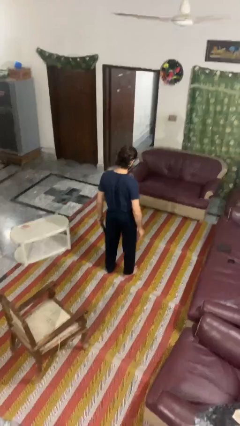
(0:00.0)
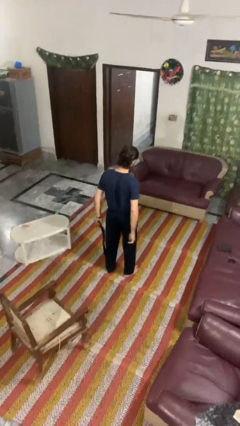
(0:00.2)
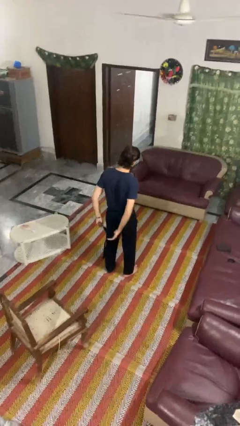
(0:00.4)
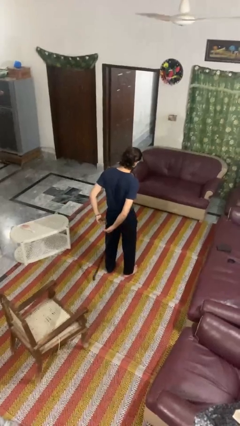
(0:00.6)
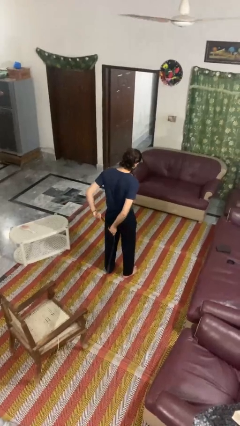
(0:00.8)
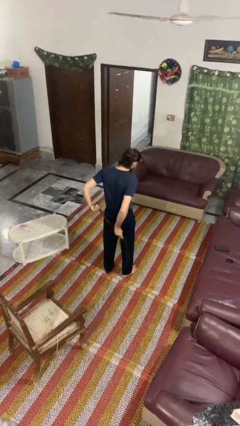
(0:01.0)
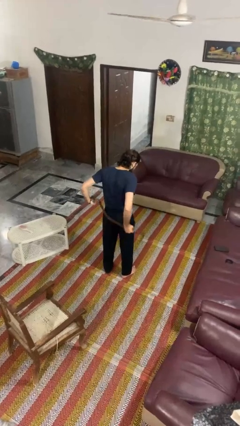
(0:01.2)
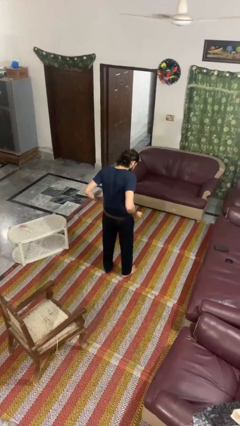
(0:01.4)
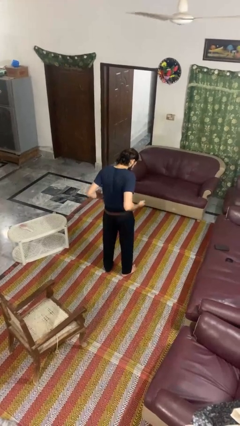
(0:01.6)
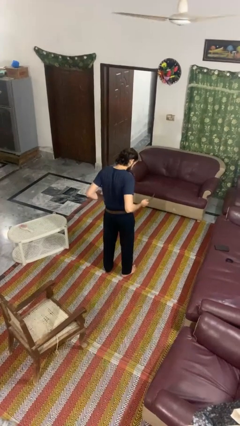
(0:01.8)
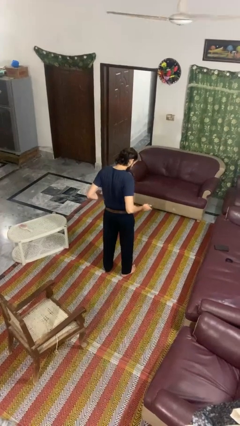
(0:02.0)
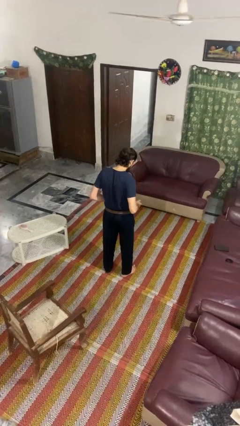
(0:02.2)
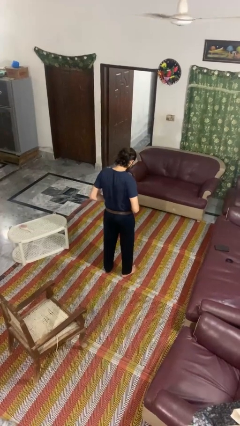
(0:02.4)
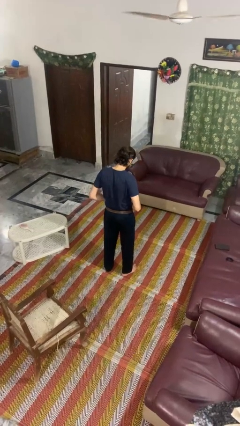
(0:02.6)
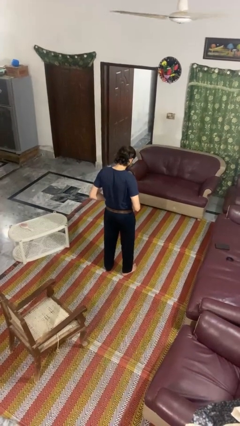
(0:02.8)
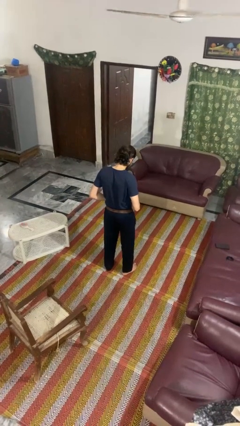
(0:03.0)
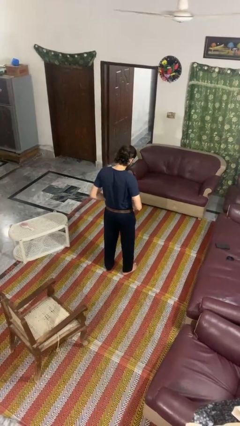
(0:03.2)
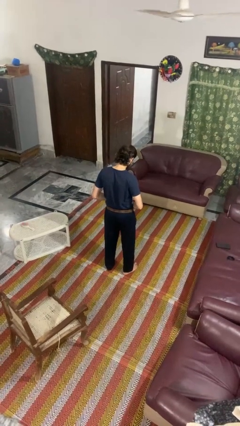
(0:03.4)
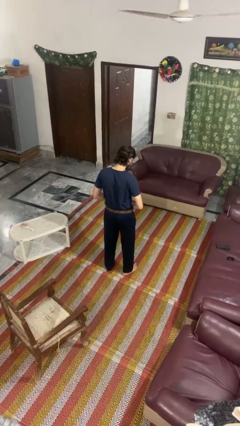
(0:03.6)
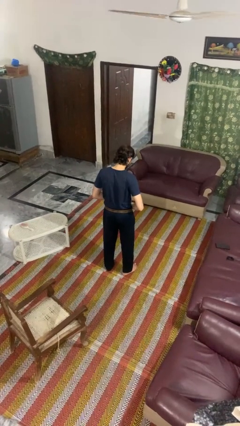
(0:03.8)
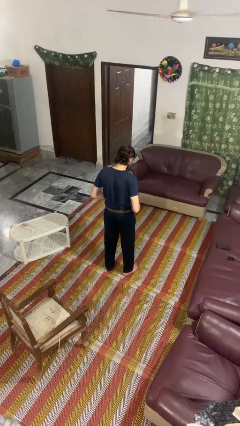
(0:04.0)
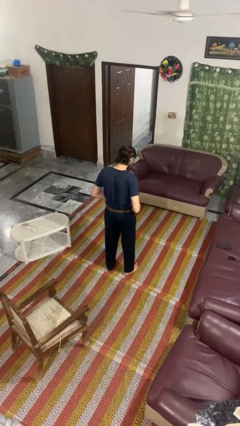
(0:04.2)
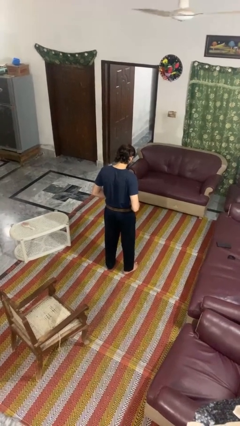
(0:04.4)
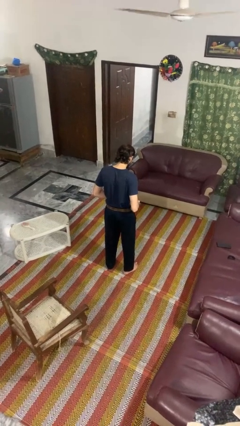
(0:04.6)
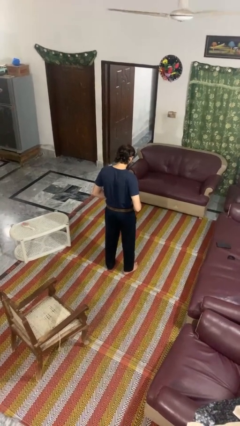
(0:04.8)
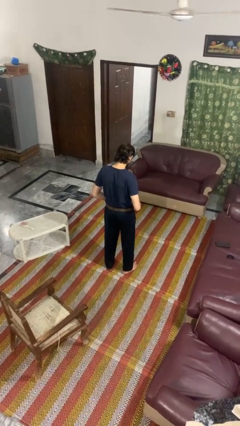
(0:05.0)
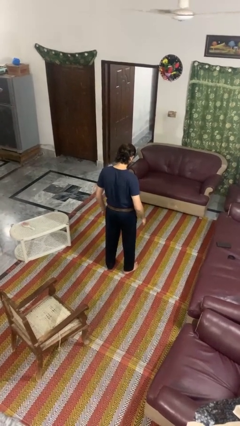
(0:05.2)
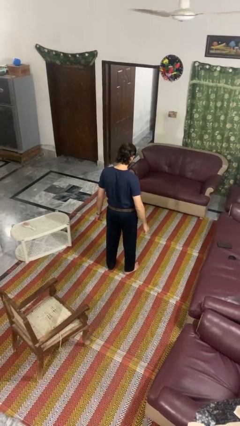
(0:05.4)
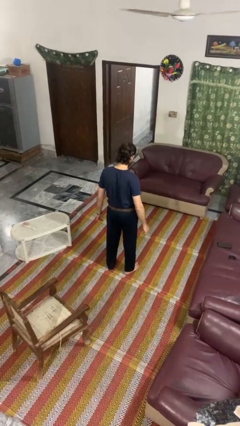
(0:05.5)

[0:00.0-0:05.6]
person puts on belt

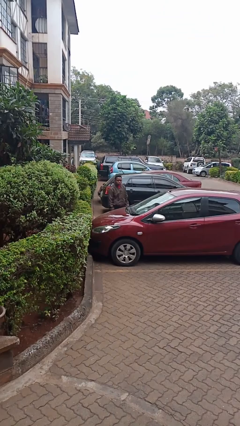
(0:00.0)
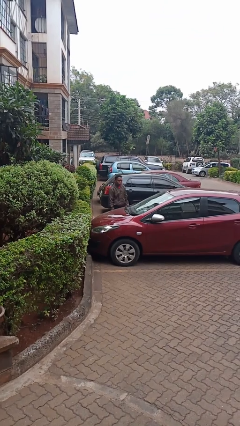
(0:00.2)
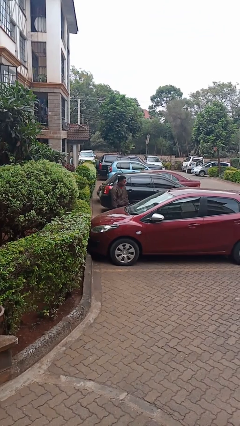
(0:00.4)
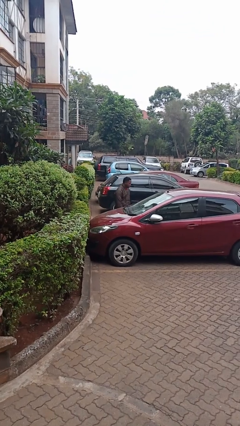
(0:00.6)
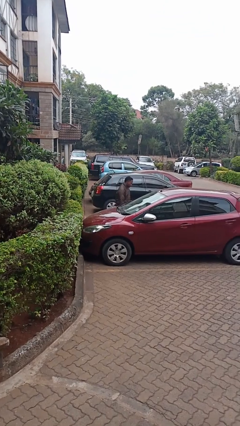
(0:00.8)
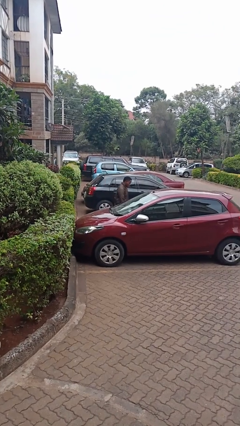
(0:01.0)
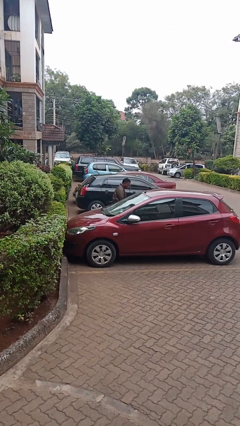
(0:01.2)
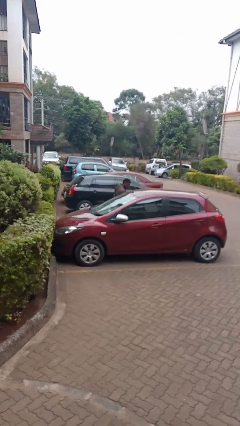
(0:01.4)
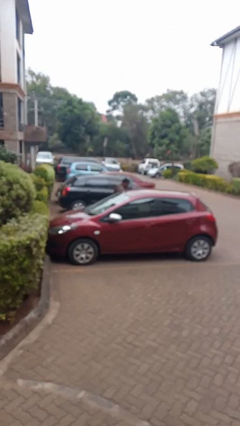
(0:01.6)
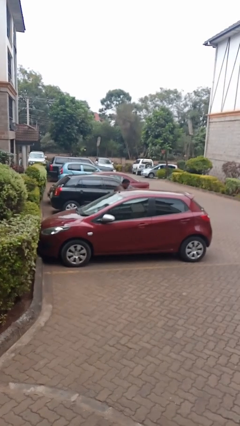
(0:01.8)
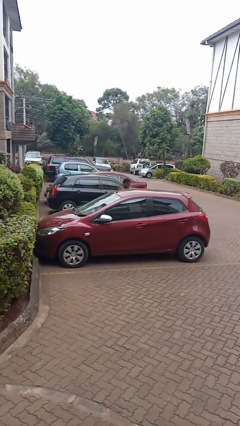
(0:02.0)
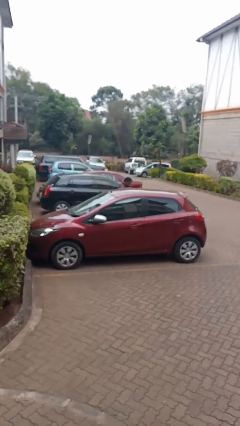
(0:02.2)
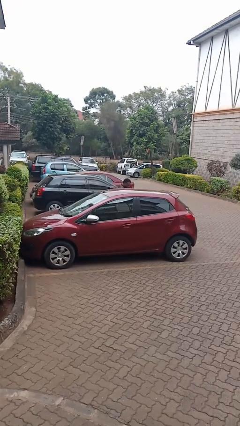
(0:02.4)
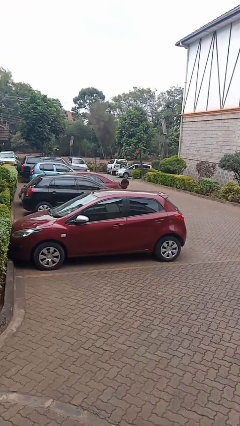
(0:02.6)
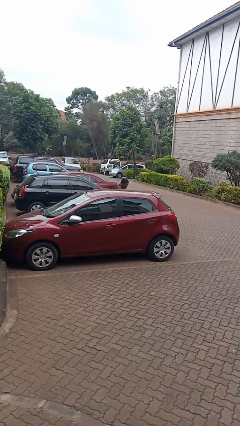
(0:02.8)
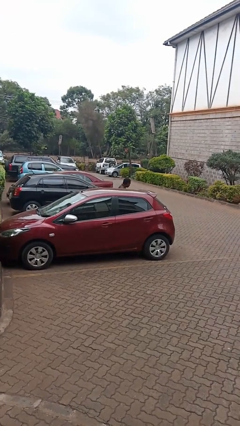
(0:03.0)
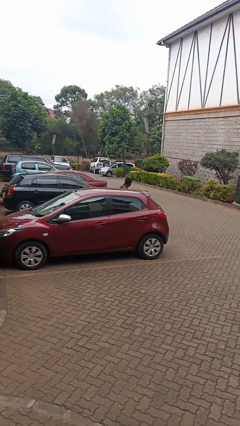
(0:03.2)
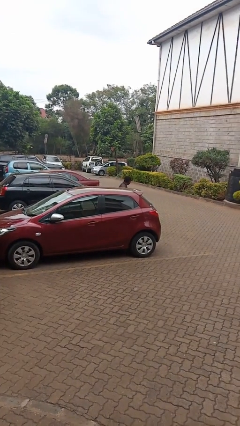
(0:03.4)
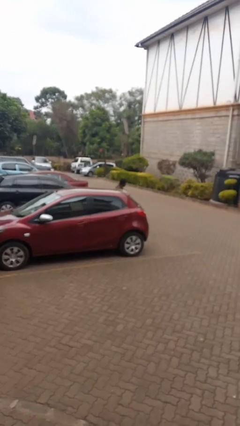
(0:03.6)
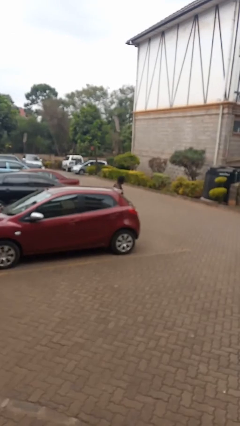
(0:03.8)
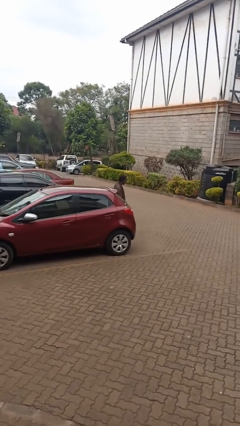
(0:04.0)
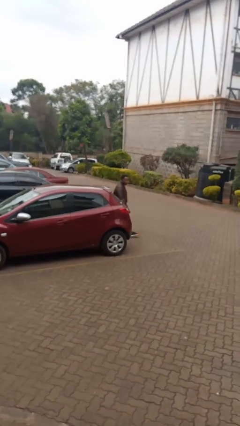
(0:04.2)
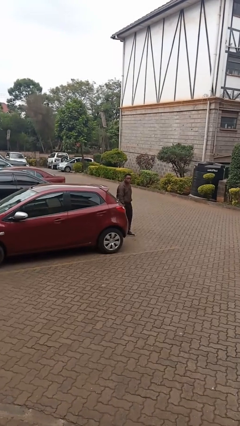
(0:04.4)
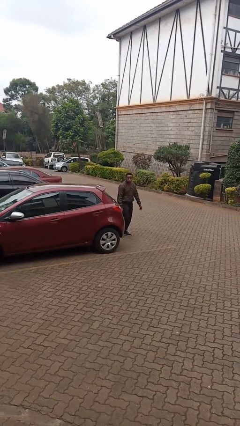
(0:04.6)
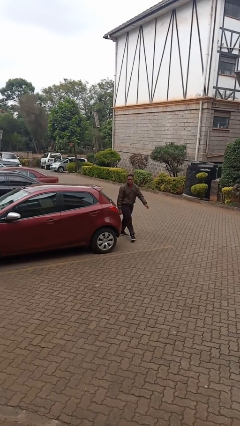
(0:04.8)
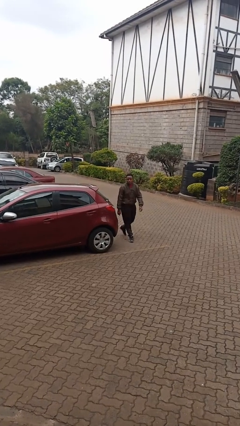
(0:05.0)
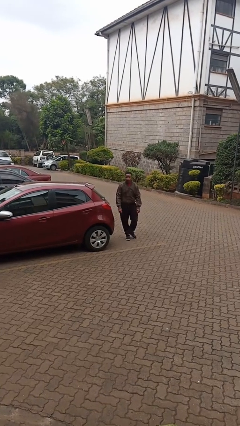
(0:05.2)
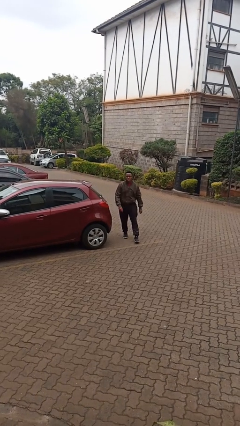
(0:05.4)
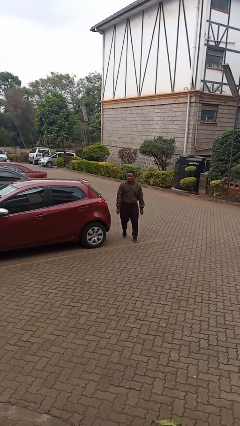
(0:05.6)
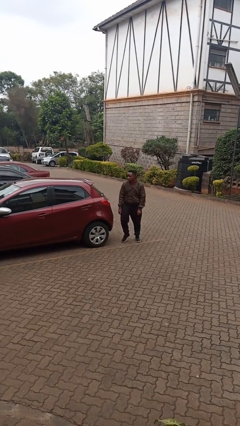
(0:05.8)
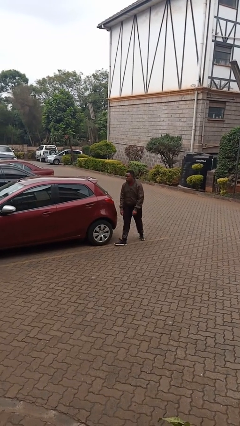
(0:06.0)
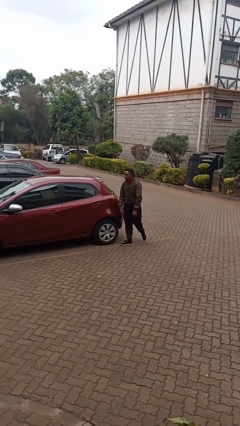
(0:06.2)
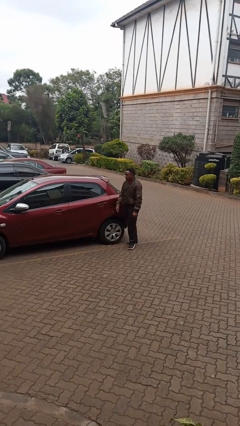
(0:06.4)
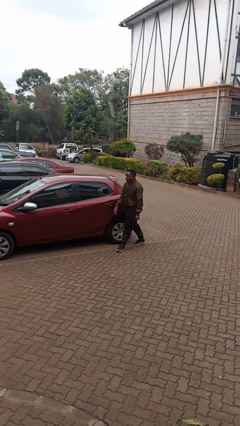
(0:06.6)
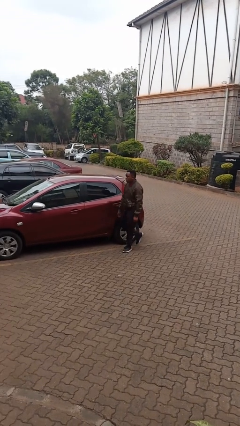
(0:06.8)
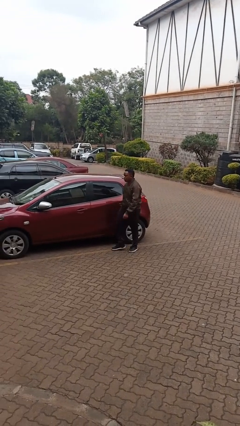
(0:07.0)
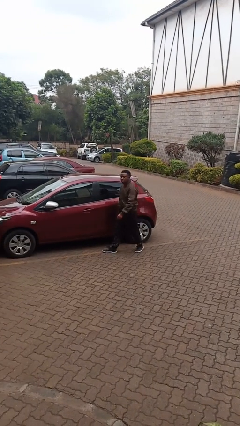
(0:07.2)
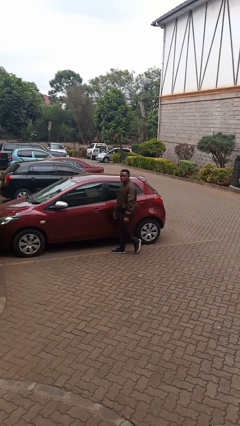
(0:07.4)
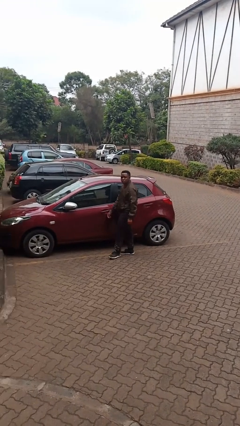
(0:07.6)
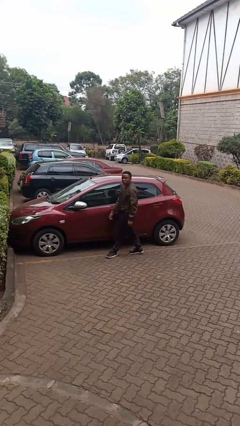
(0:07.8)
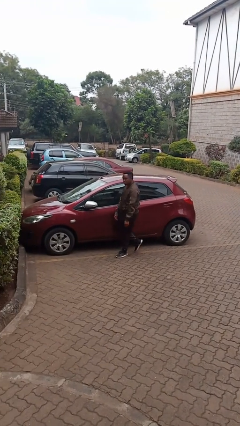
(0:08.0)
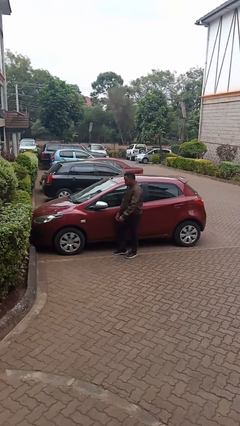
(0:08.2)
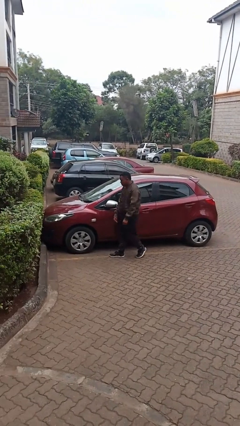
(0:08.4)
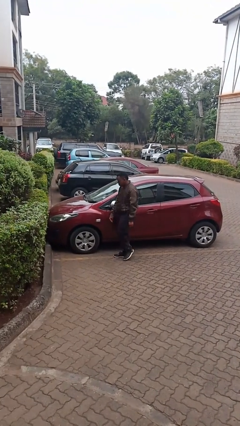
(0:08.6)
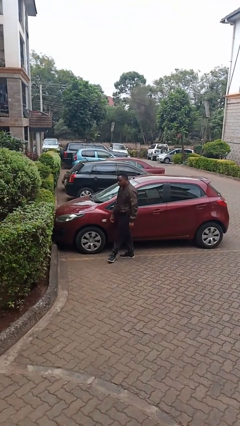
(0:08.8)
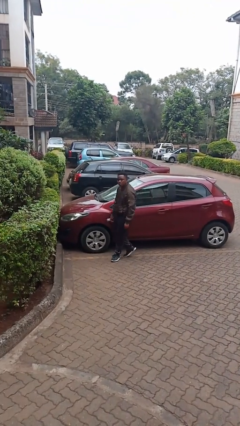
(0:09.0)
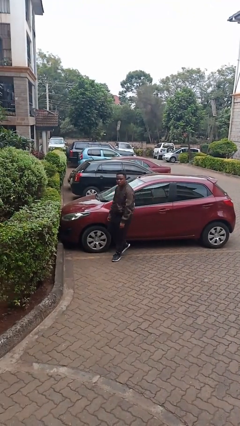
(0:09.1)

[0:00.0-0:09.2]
person walks around car

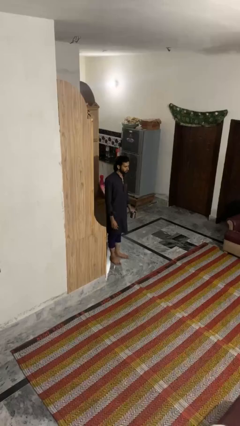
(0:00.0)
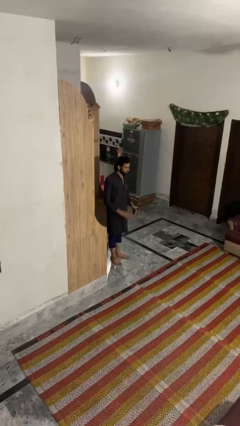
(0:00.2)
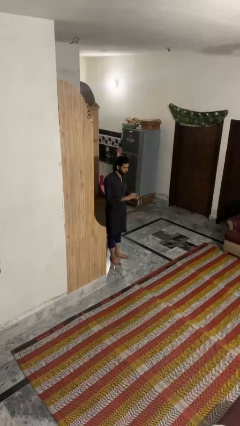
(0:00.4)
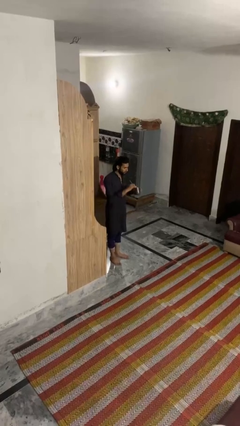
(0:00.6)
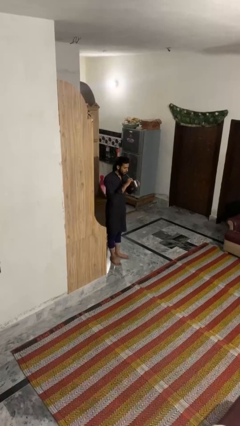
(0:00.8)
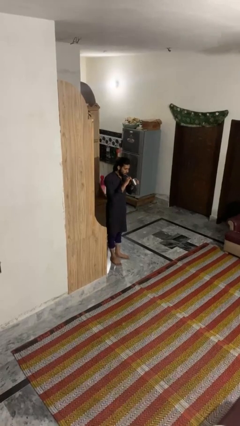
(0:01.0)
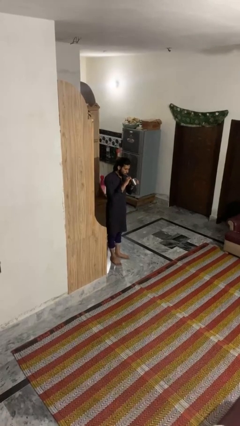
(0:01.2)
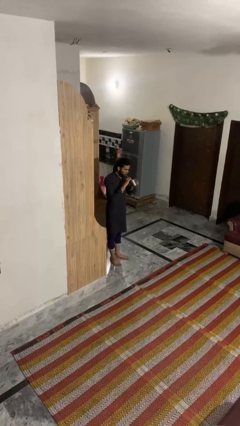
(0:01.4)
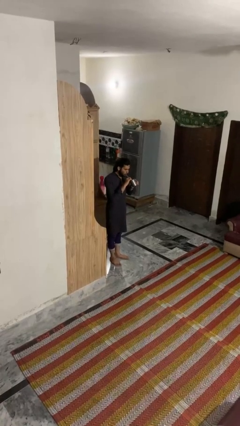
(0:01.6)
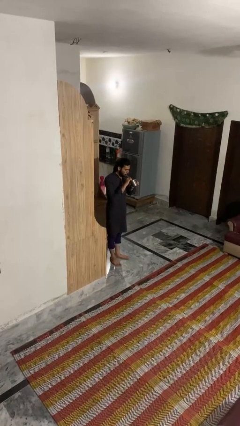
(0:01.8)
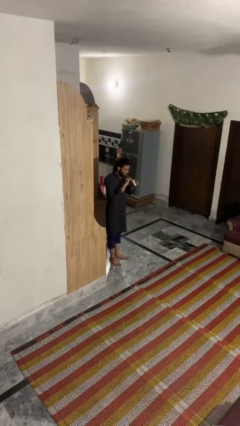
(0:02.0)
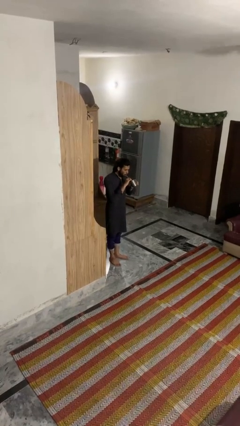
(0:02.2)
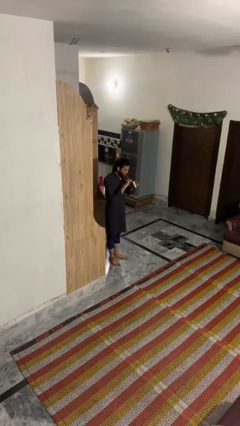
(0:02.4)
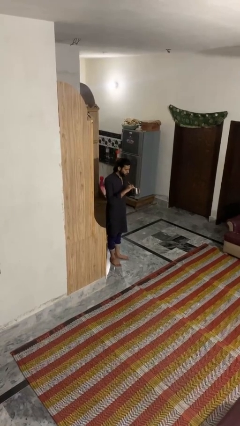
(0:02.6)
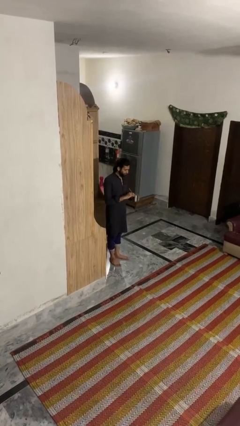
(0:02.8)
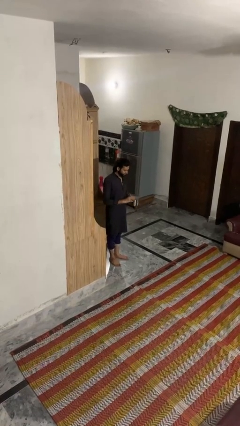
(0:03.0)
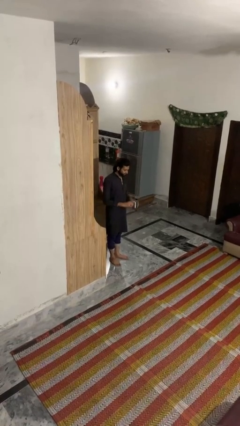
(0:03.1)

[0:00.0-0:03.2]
person drinks from straw
